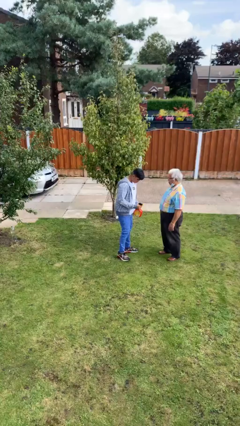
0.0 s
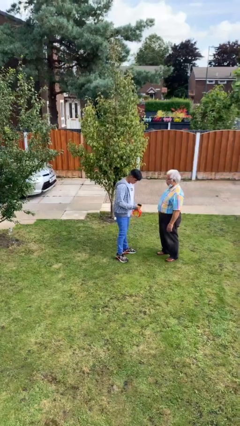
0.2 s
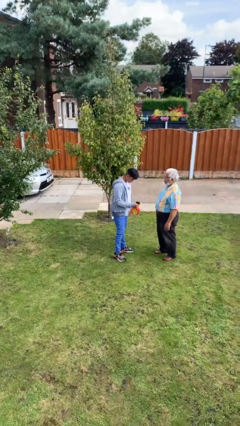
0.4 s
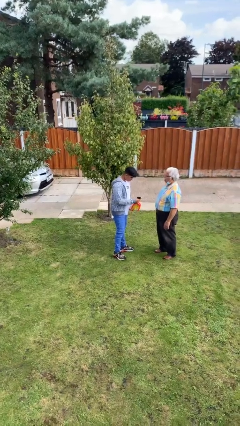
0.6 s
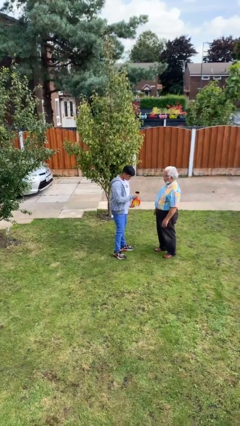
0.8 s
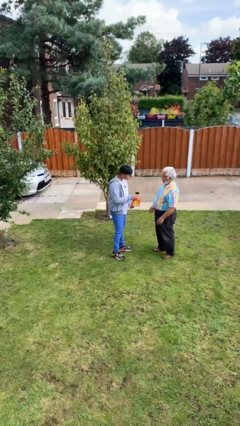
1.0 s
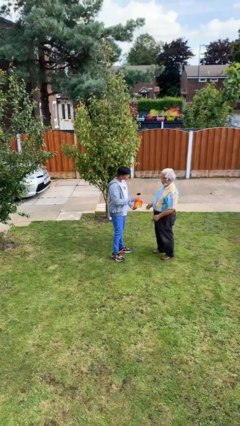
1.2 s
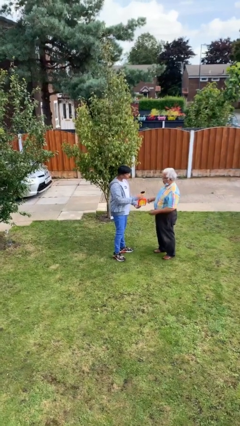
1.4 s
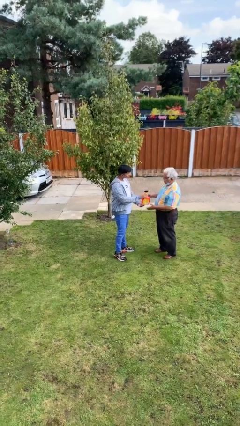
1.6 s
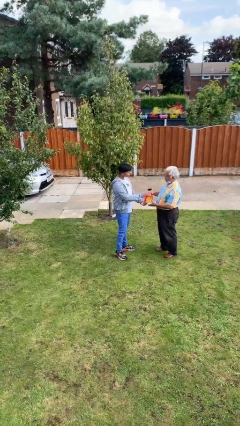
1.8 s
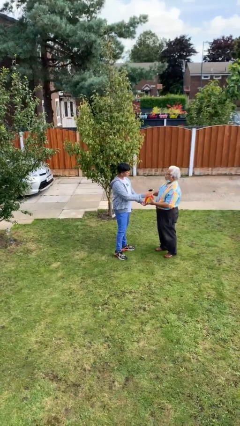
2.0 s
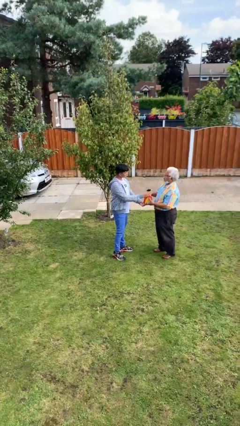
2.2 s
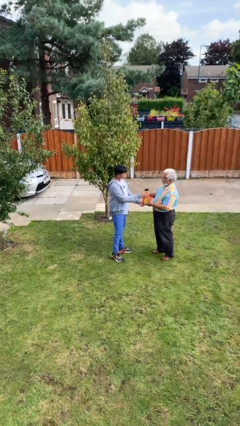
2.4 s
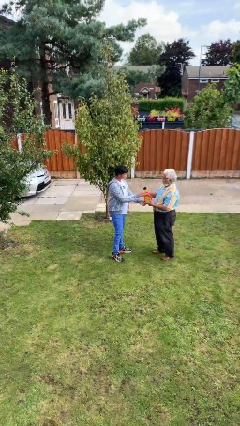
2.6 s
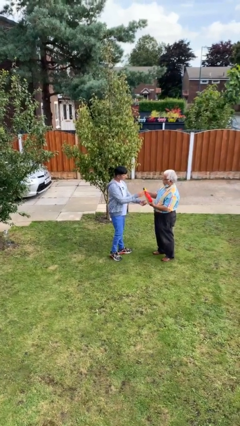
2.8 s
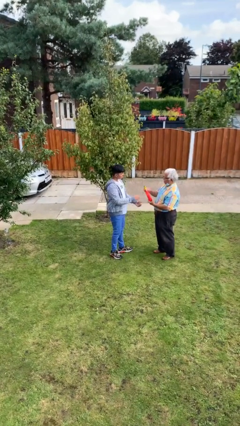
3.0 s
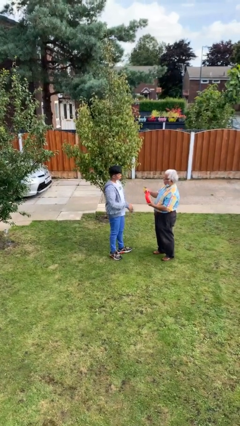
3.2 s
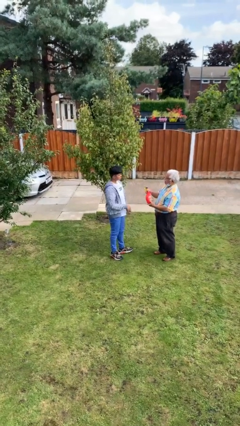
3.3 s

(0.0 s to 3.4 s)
person transfers object to person

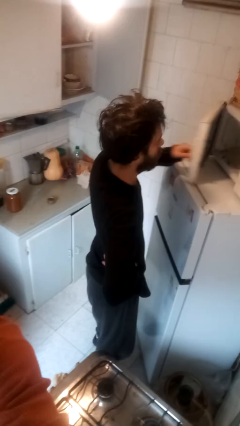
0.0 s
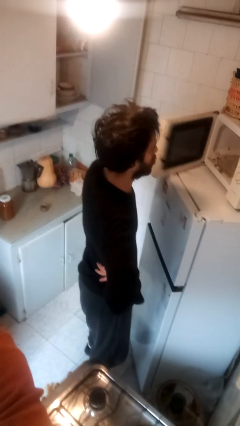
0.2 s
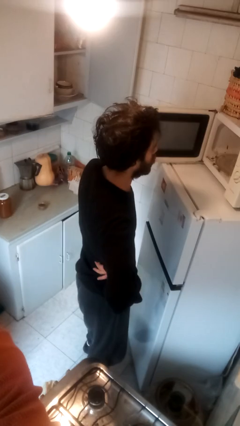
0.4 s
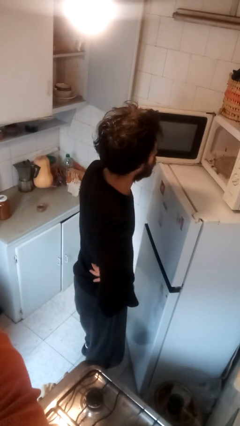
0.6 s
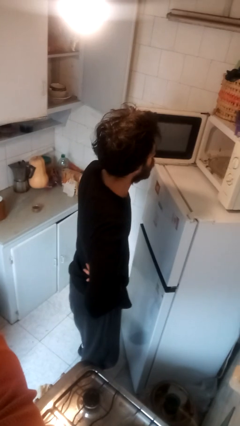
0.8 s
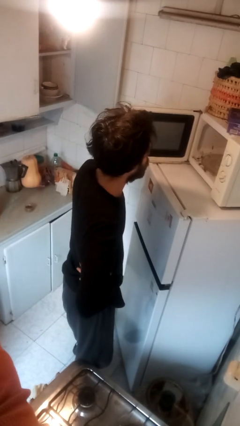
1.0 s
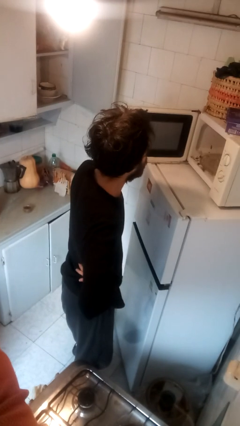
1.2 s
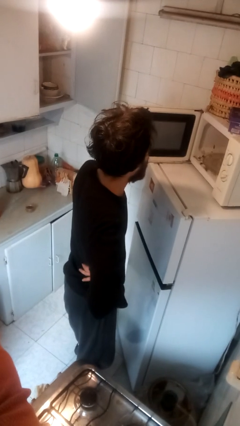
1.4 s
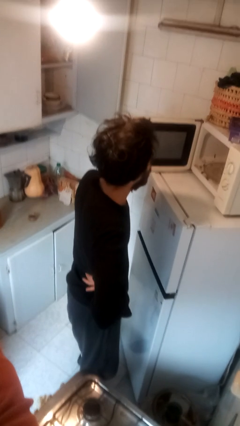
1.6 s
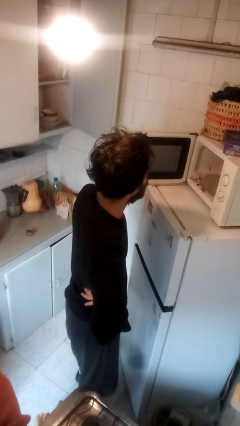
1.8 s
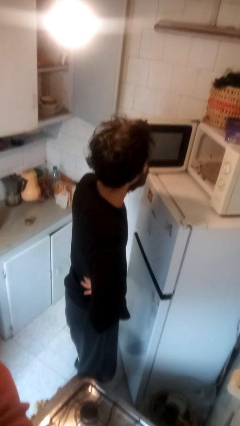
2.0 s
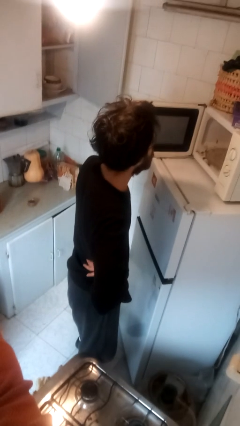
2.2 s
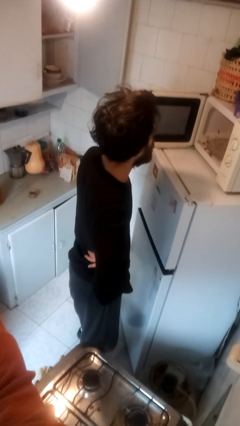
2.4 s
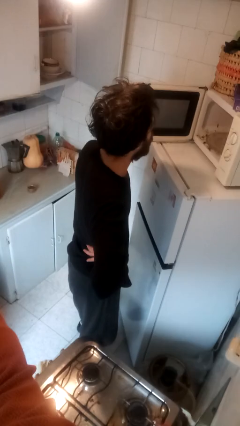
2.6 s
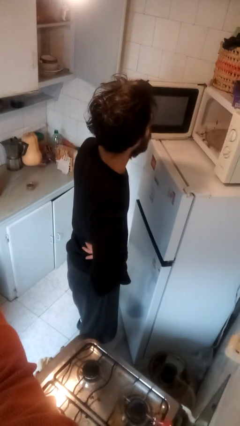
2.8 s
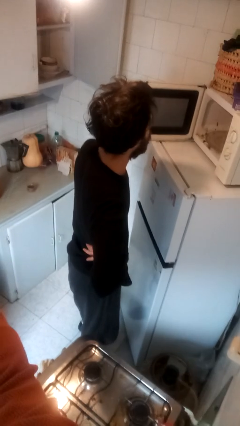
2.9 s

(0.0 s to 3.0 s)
person opens microwave

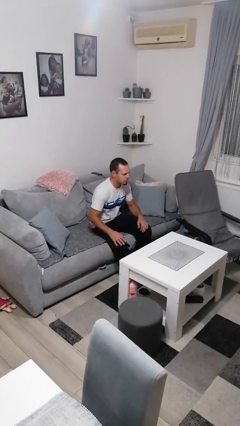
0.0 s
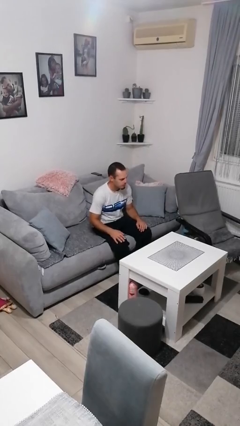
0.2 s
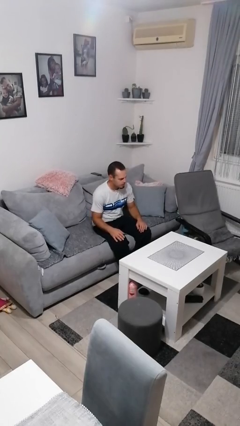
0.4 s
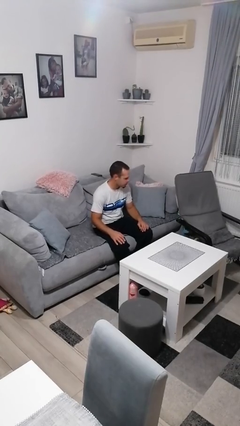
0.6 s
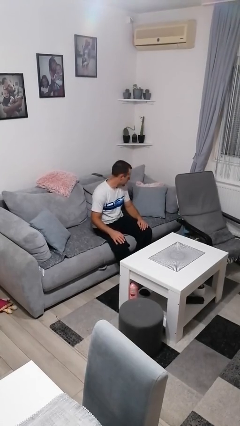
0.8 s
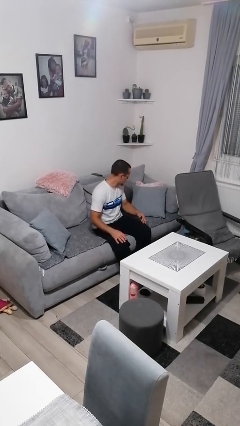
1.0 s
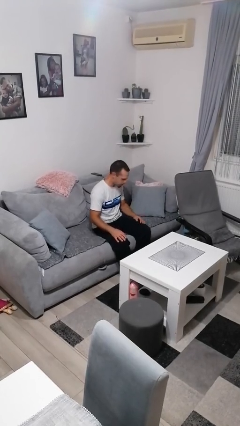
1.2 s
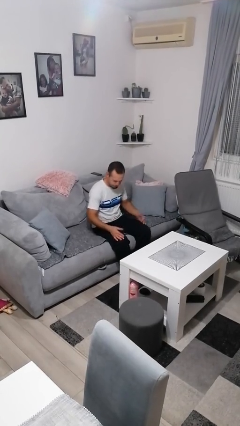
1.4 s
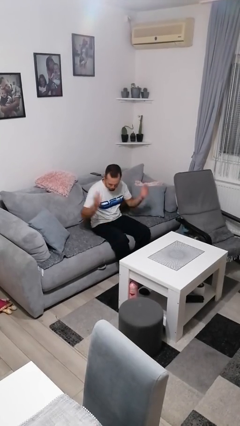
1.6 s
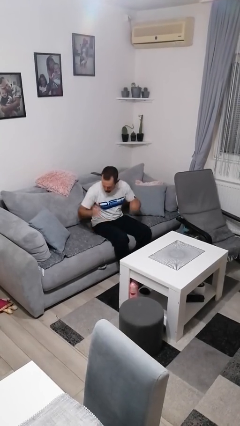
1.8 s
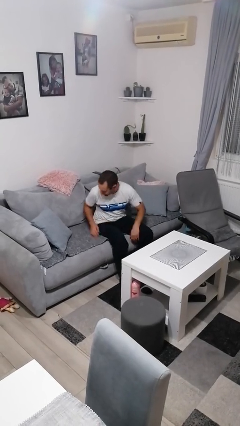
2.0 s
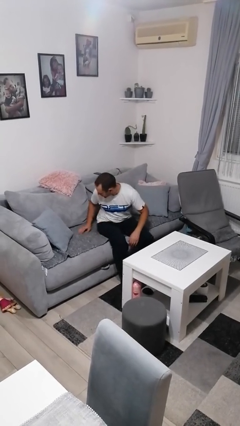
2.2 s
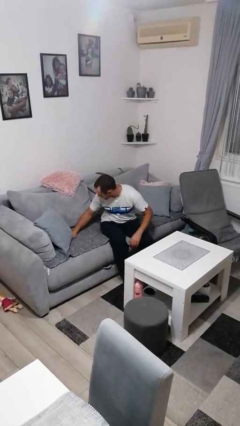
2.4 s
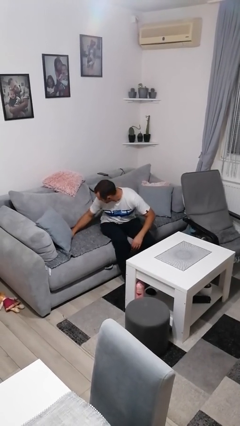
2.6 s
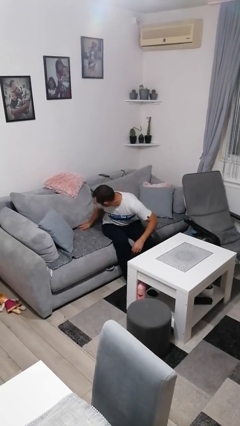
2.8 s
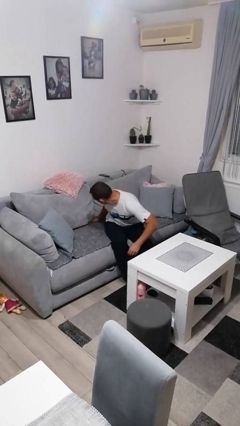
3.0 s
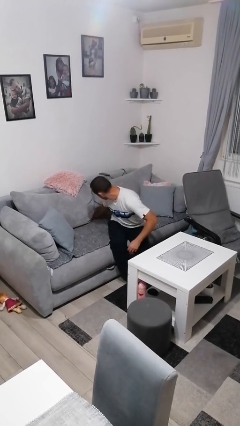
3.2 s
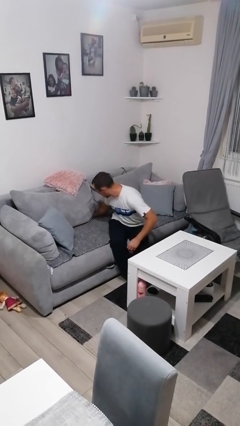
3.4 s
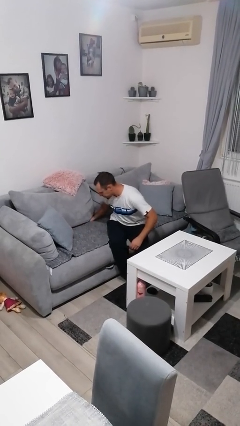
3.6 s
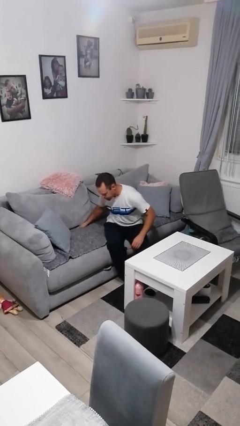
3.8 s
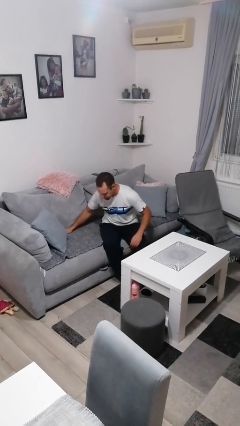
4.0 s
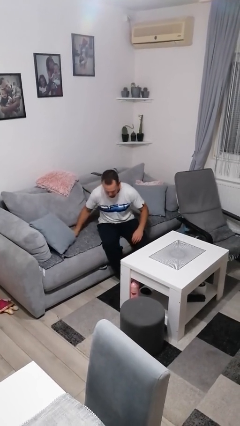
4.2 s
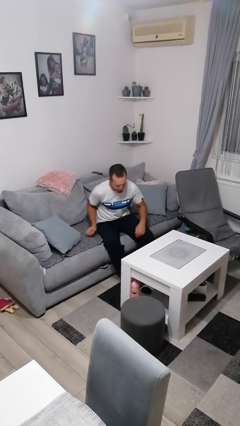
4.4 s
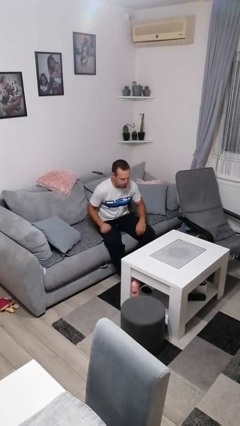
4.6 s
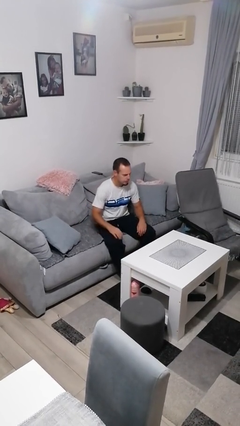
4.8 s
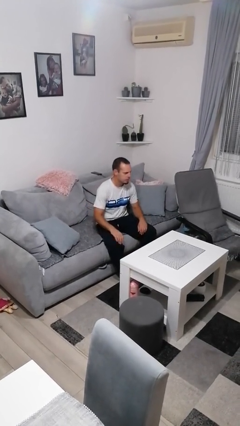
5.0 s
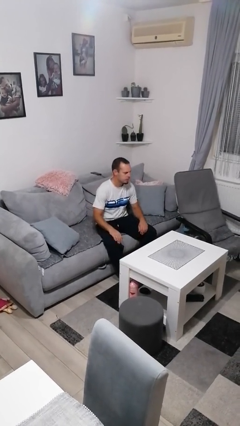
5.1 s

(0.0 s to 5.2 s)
person searches in couch

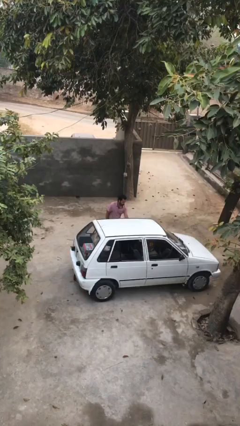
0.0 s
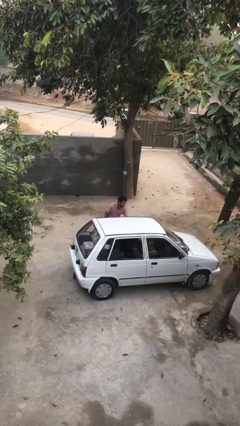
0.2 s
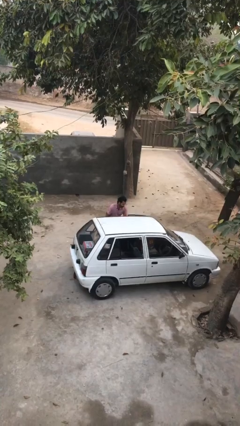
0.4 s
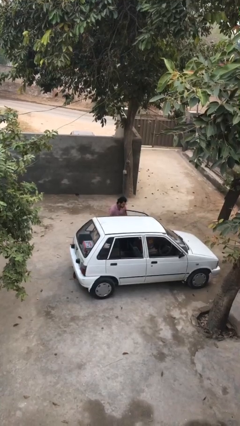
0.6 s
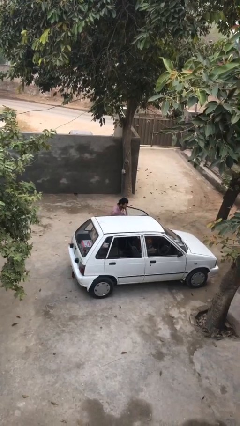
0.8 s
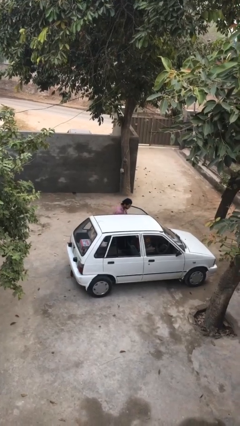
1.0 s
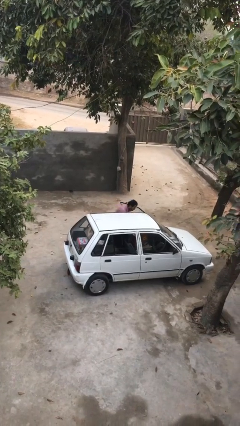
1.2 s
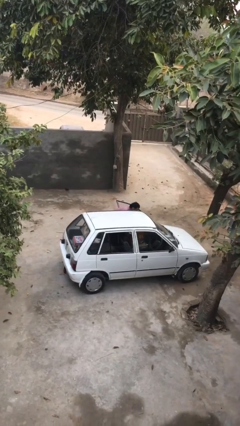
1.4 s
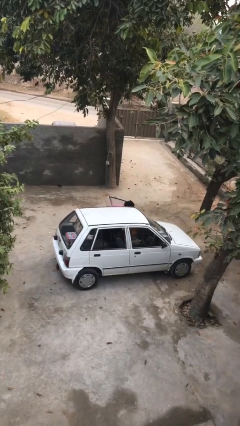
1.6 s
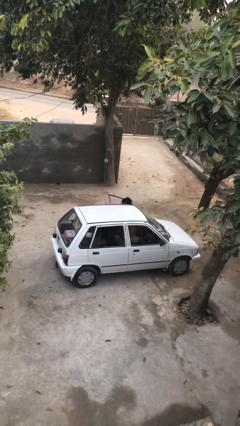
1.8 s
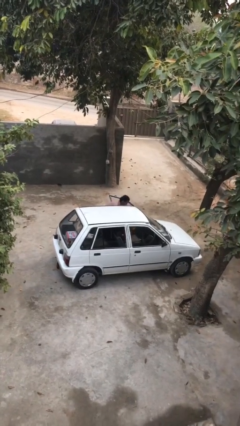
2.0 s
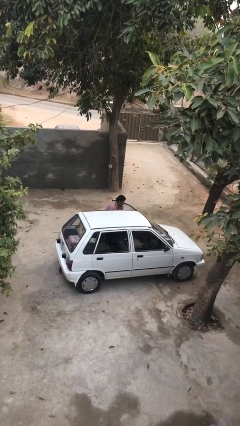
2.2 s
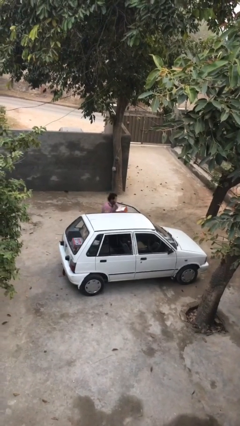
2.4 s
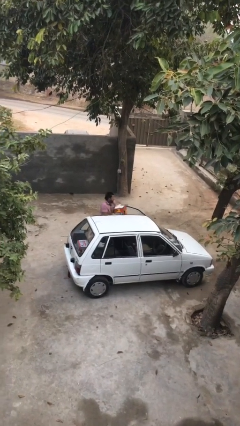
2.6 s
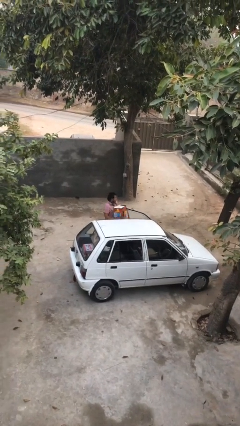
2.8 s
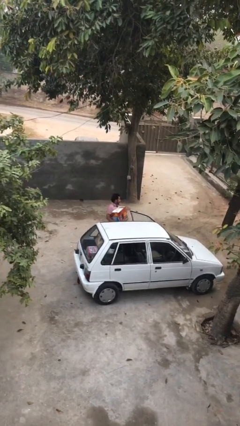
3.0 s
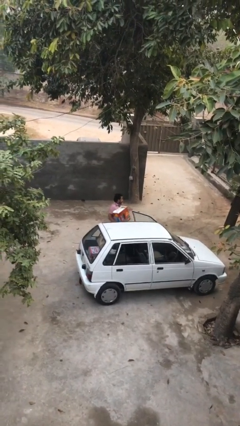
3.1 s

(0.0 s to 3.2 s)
person unloads car

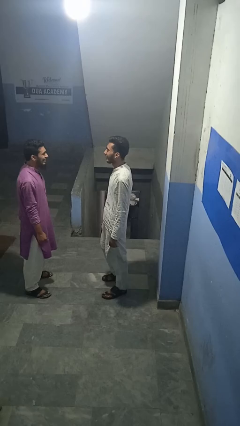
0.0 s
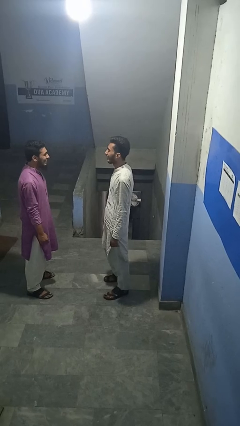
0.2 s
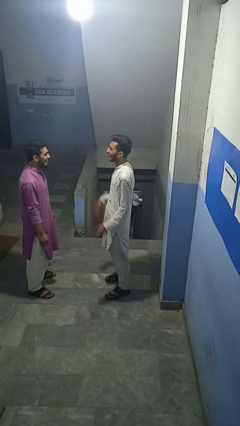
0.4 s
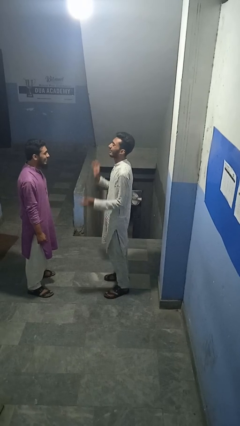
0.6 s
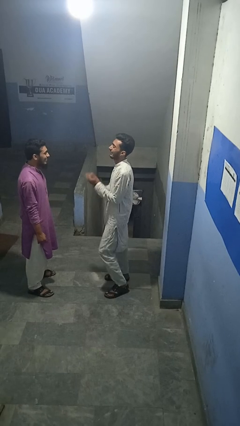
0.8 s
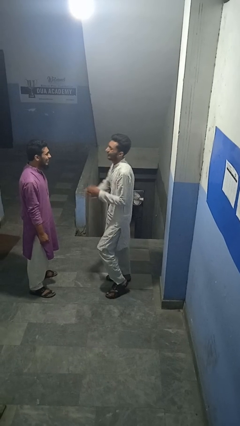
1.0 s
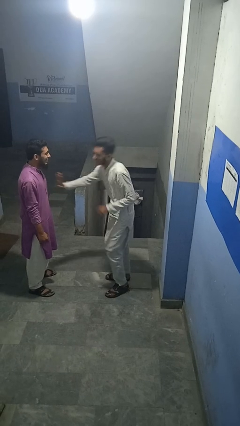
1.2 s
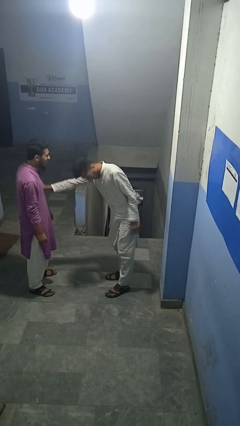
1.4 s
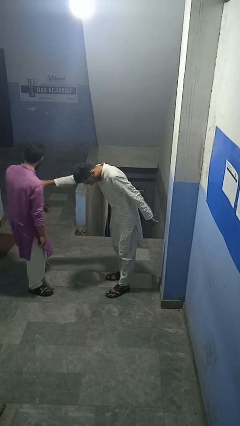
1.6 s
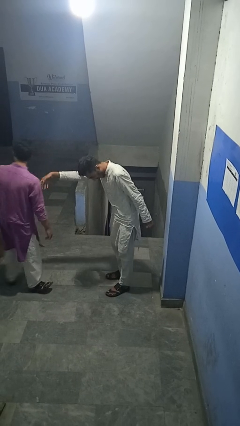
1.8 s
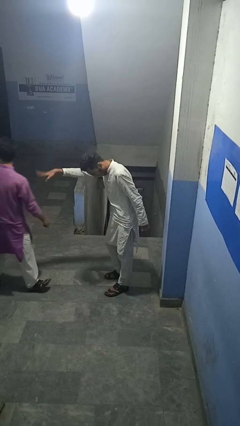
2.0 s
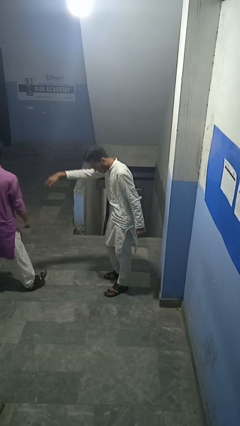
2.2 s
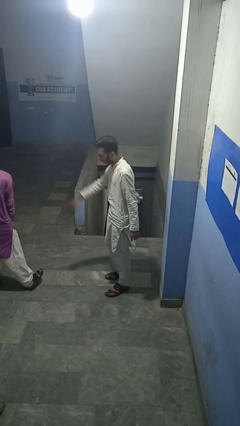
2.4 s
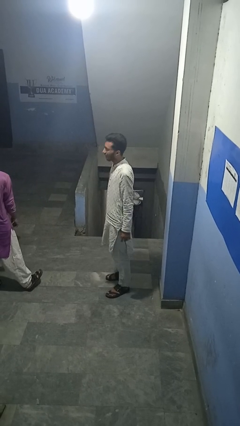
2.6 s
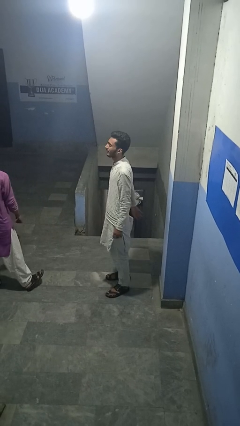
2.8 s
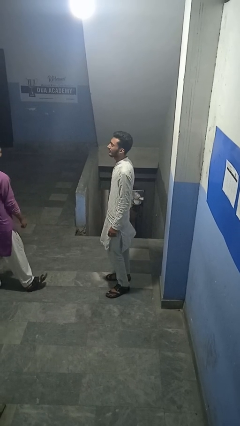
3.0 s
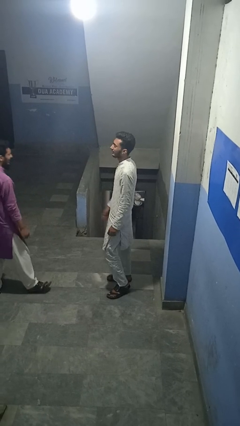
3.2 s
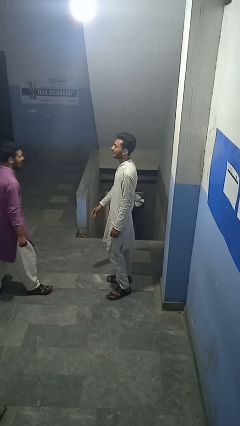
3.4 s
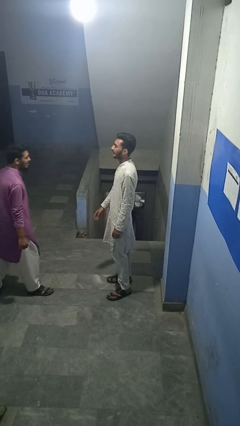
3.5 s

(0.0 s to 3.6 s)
person shoves person
